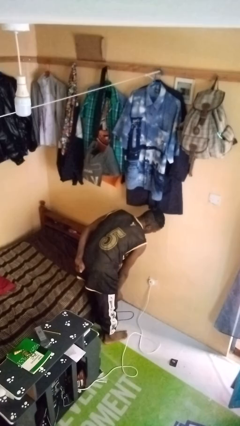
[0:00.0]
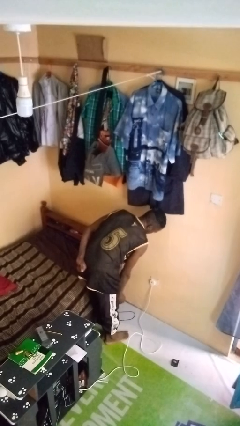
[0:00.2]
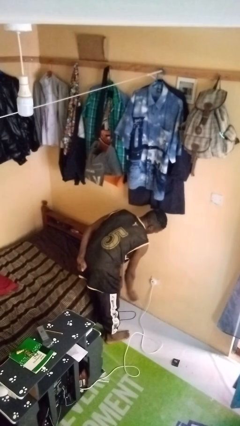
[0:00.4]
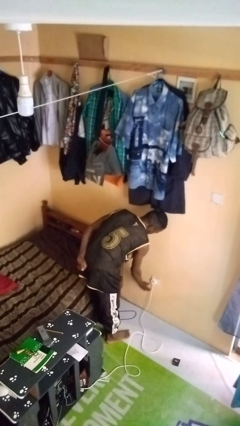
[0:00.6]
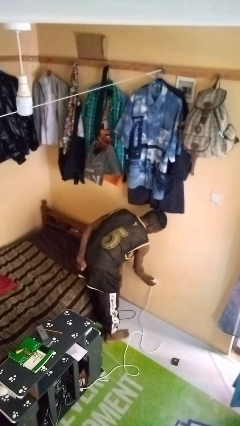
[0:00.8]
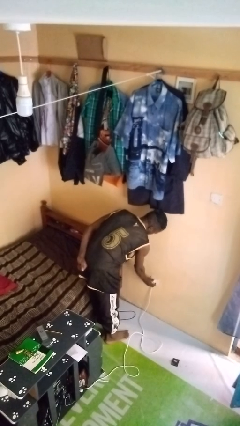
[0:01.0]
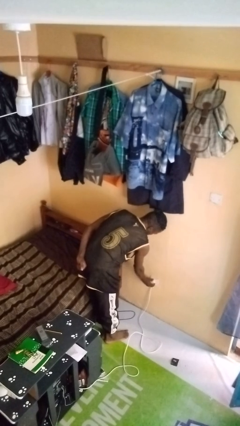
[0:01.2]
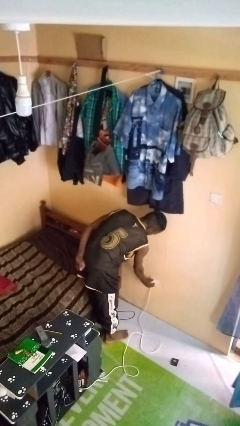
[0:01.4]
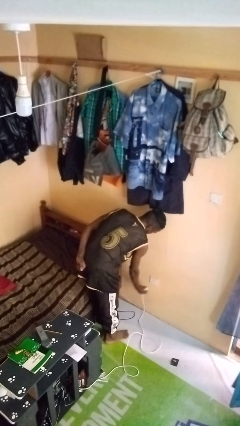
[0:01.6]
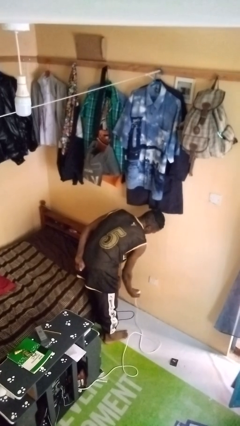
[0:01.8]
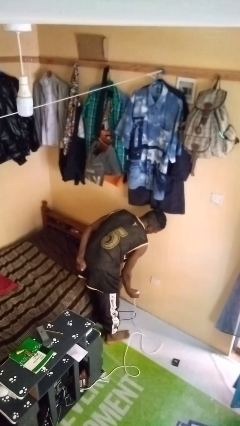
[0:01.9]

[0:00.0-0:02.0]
person unplugs from electrical socket

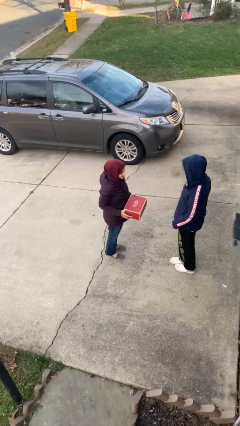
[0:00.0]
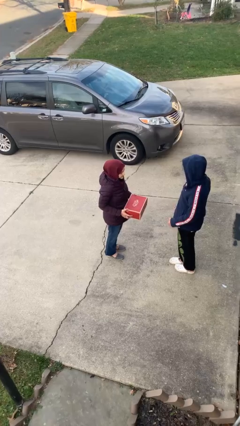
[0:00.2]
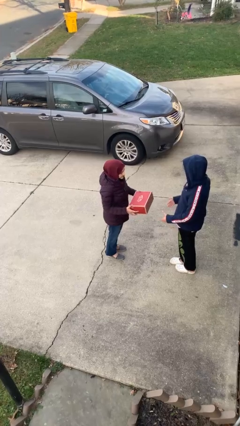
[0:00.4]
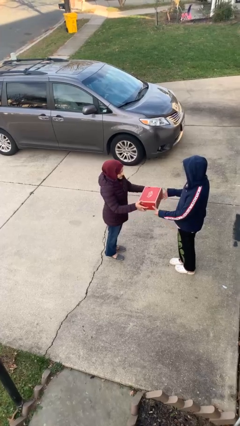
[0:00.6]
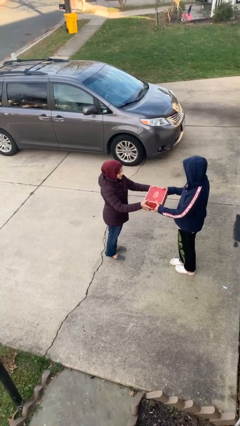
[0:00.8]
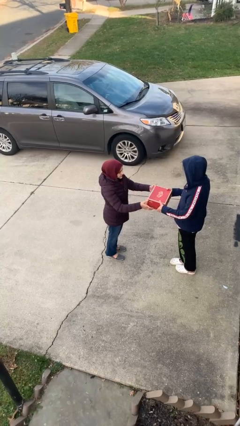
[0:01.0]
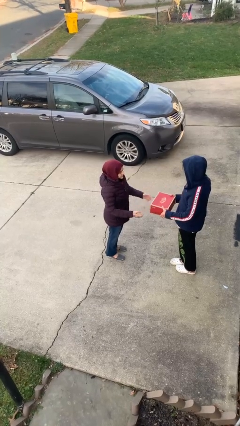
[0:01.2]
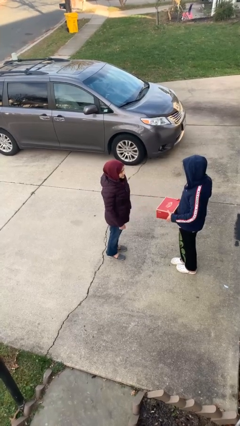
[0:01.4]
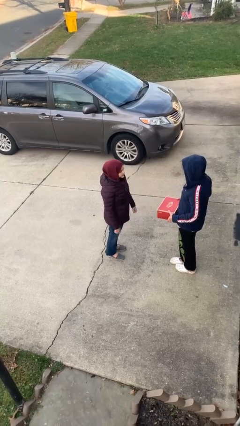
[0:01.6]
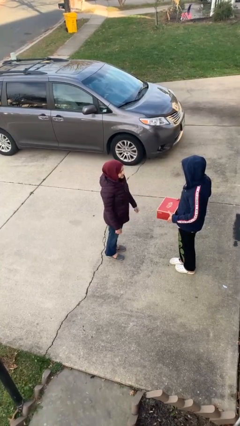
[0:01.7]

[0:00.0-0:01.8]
person transfers object to person

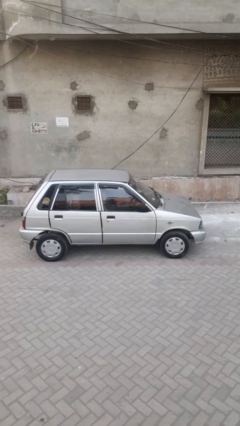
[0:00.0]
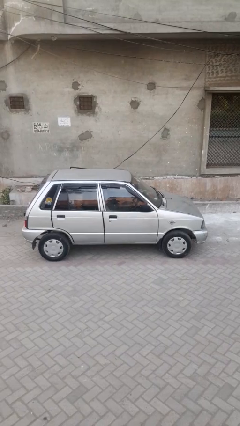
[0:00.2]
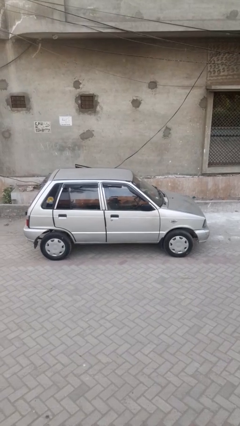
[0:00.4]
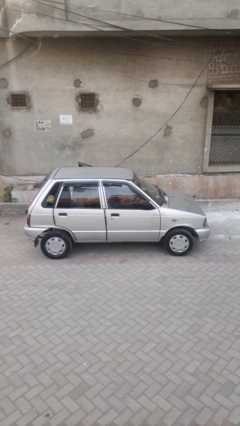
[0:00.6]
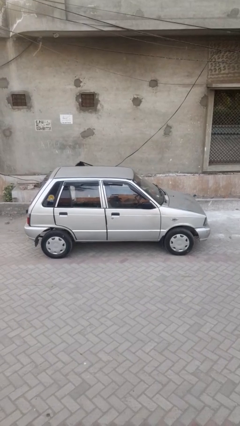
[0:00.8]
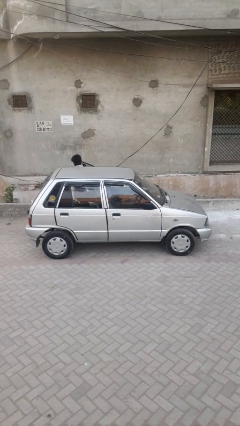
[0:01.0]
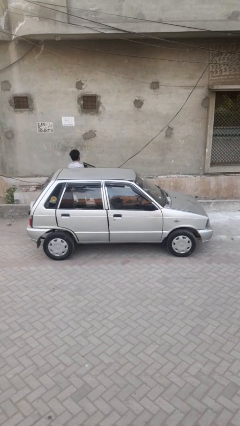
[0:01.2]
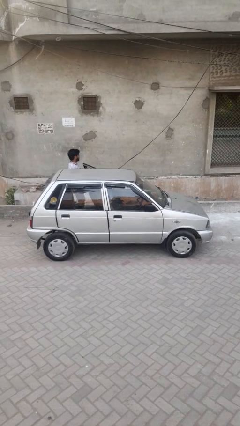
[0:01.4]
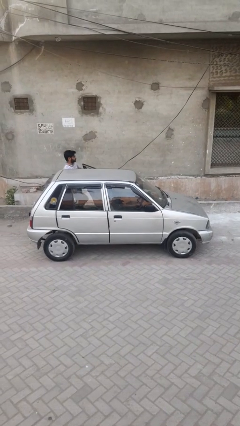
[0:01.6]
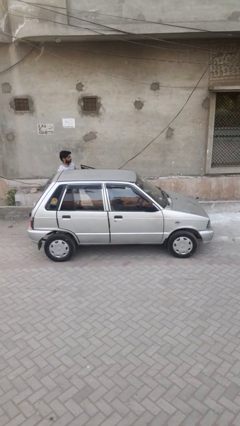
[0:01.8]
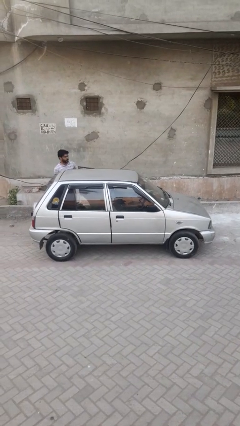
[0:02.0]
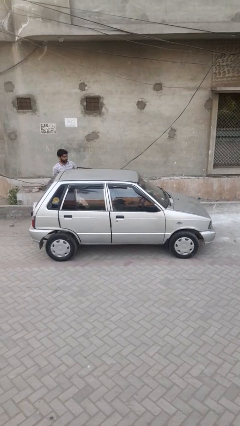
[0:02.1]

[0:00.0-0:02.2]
car drops off person

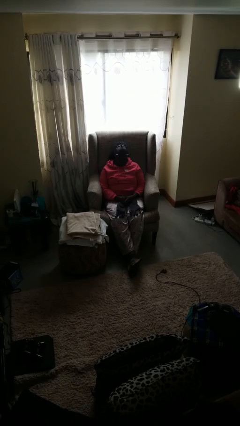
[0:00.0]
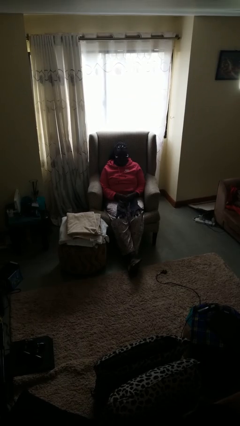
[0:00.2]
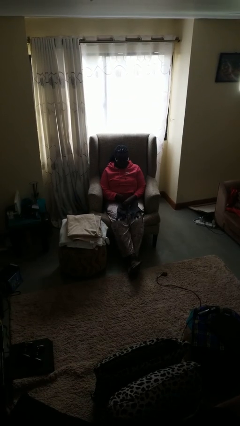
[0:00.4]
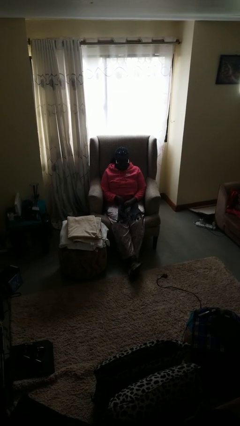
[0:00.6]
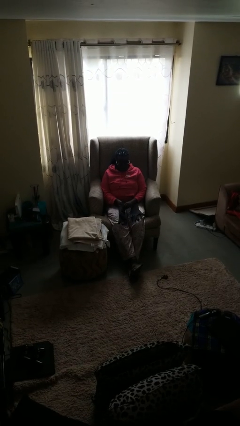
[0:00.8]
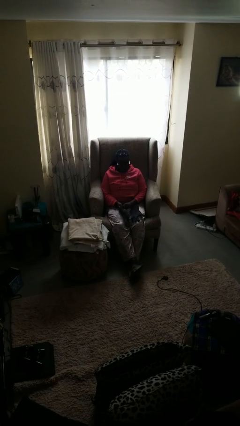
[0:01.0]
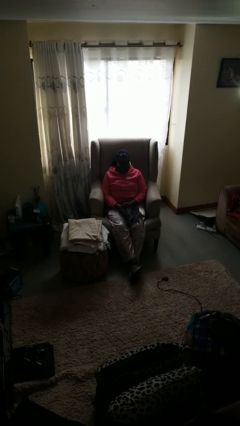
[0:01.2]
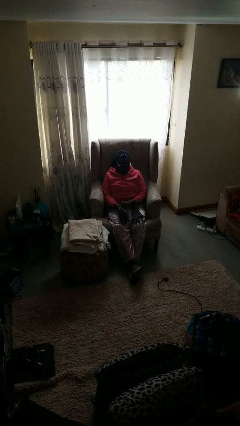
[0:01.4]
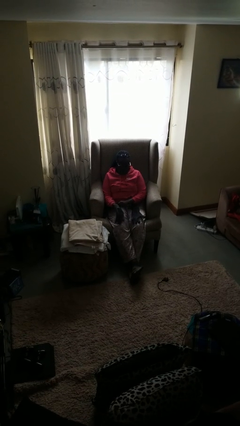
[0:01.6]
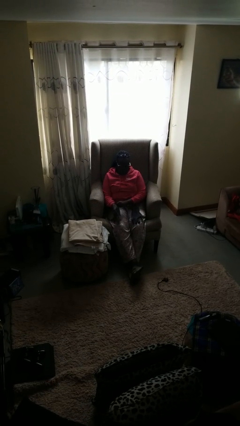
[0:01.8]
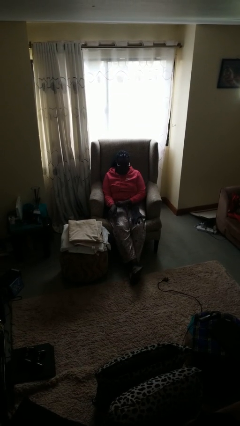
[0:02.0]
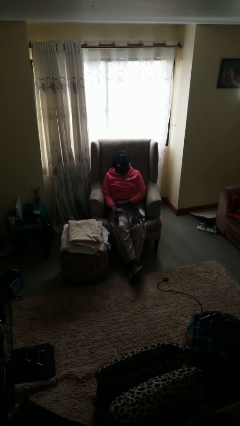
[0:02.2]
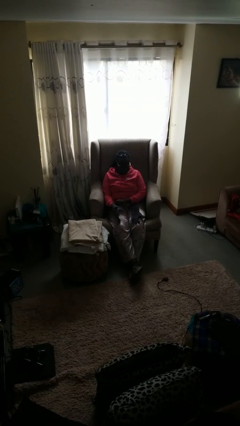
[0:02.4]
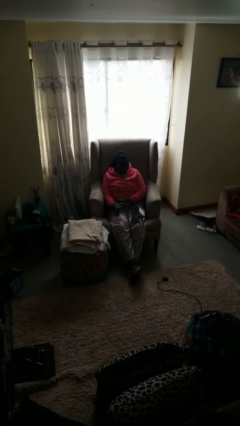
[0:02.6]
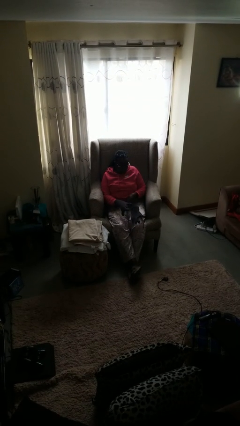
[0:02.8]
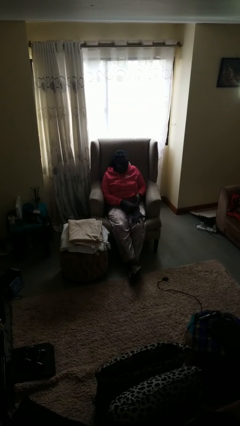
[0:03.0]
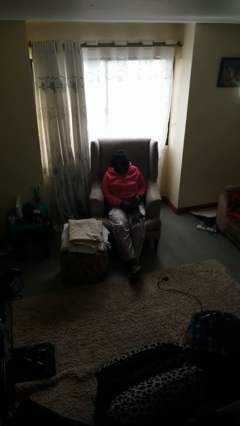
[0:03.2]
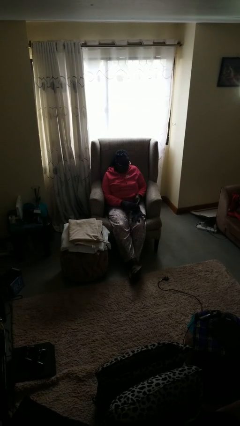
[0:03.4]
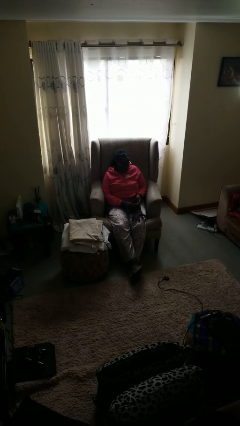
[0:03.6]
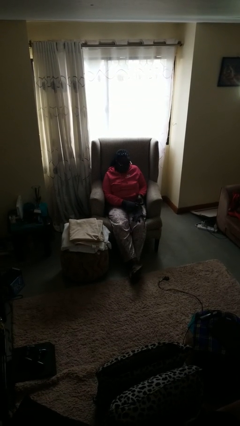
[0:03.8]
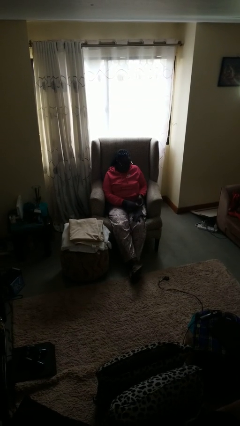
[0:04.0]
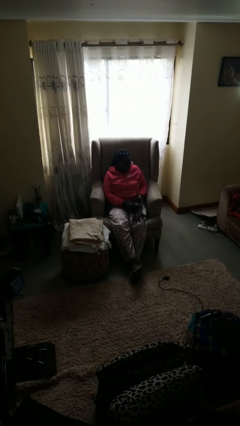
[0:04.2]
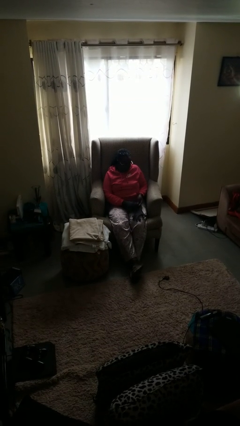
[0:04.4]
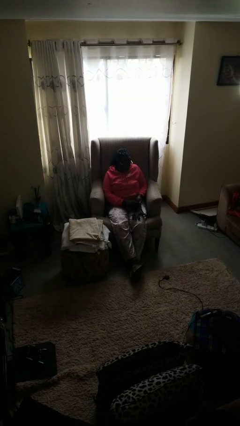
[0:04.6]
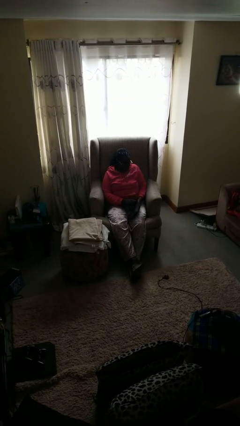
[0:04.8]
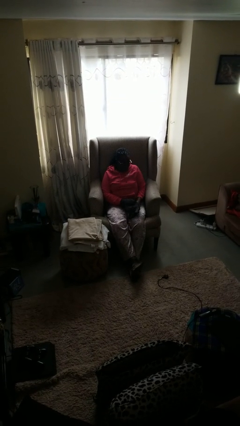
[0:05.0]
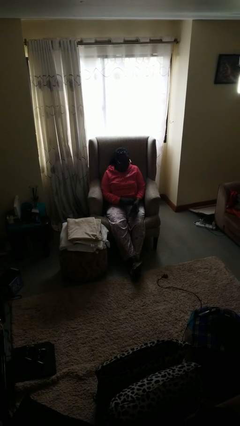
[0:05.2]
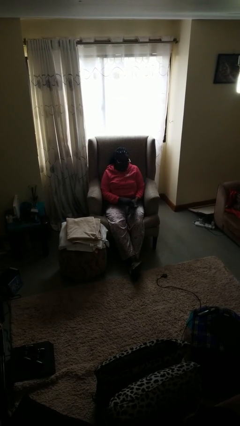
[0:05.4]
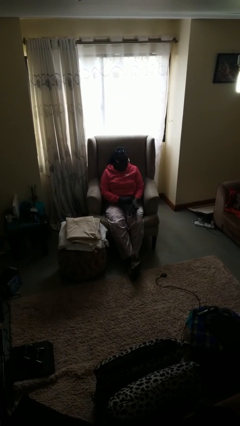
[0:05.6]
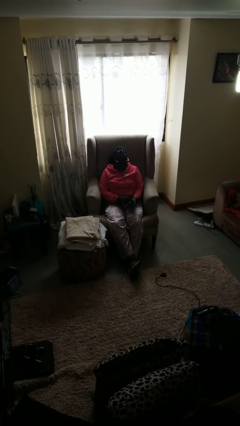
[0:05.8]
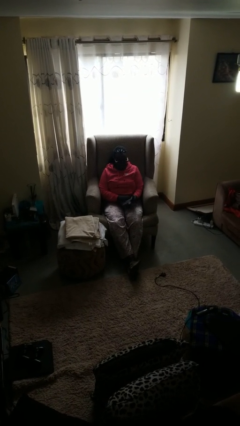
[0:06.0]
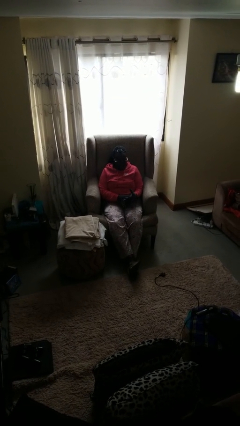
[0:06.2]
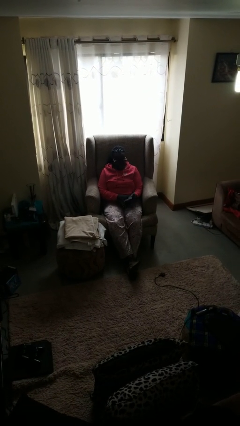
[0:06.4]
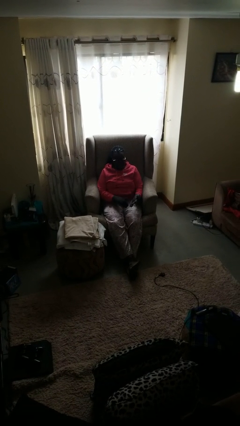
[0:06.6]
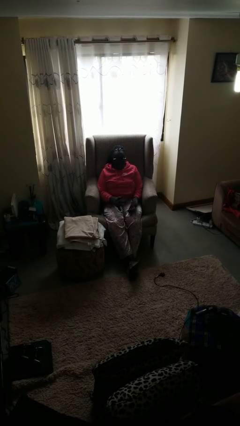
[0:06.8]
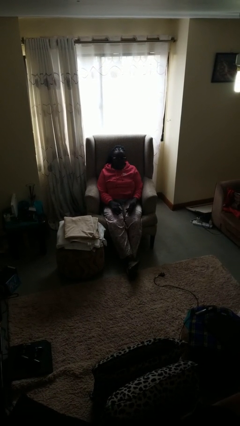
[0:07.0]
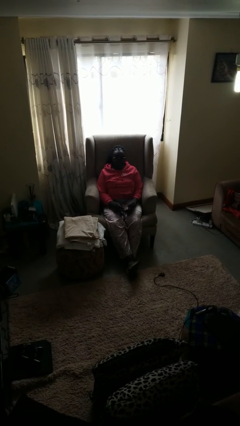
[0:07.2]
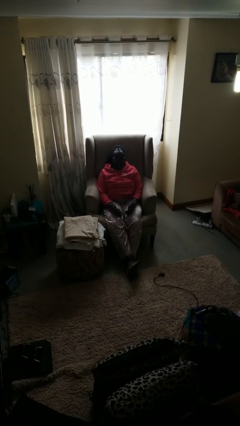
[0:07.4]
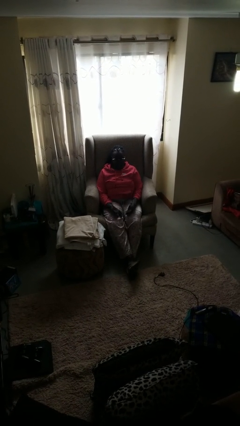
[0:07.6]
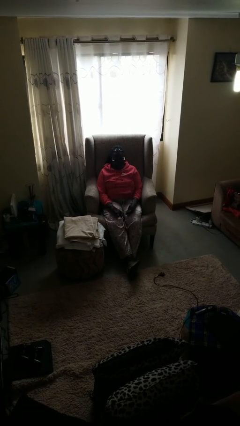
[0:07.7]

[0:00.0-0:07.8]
person puts on gloves

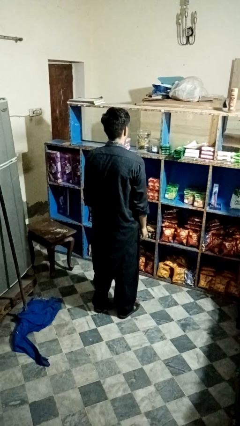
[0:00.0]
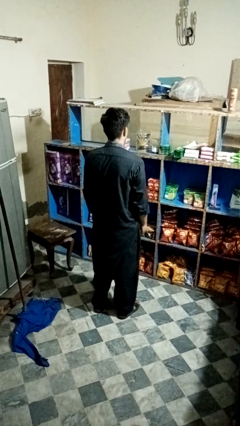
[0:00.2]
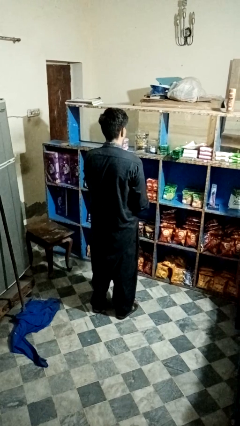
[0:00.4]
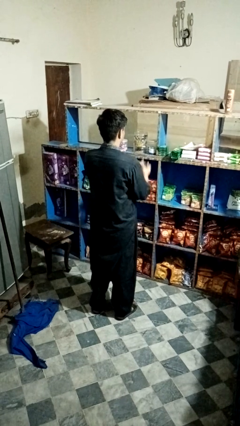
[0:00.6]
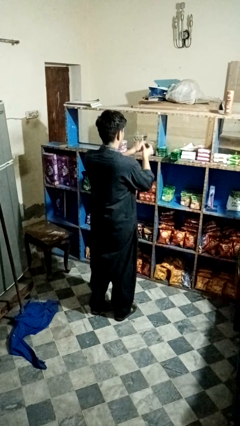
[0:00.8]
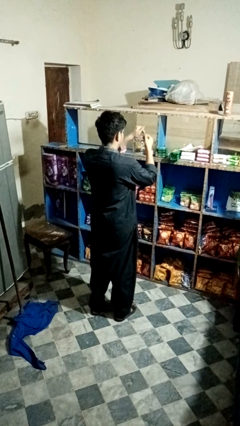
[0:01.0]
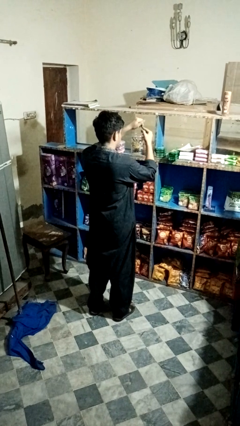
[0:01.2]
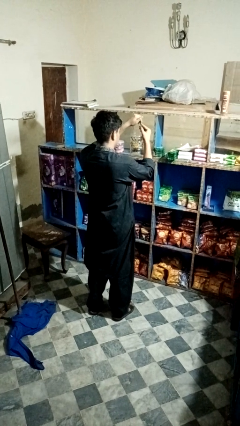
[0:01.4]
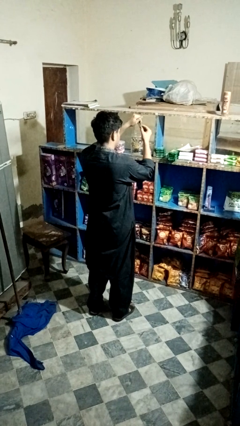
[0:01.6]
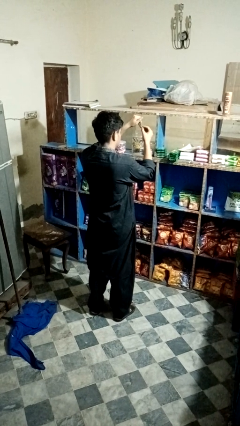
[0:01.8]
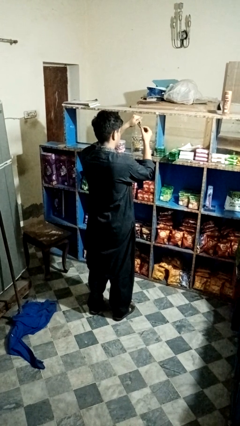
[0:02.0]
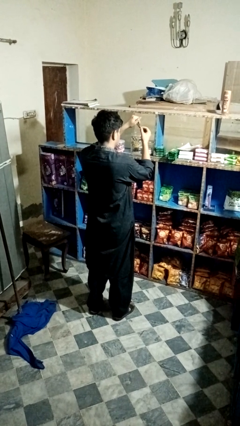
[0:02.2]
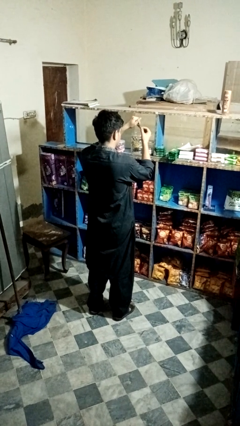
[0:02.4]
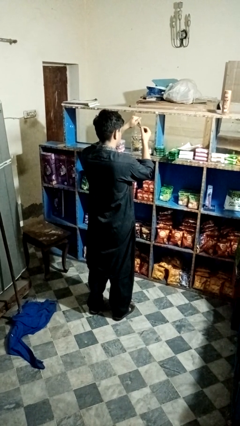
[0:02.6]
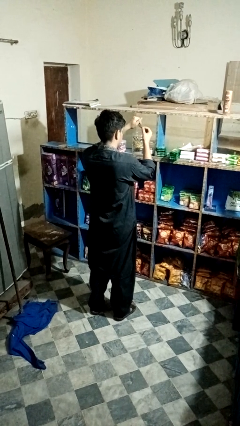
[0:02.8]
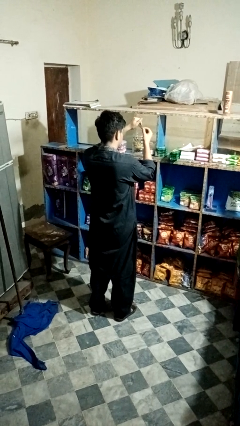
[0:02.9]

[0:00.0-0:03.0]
person clips fingernails

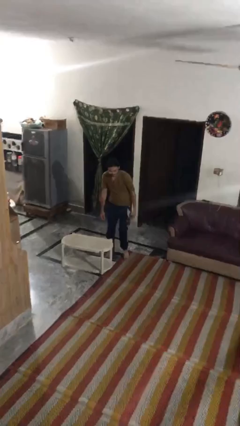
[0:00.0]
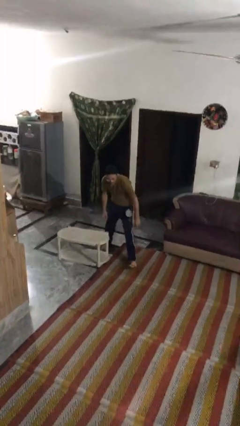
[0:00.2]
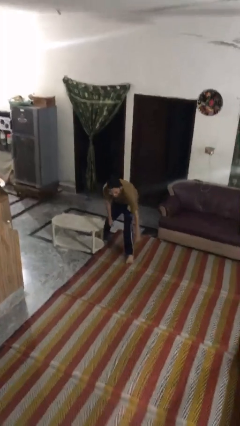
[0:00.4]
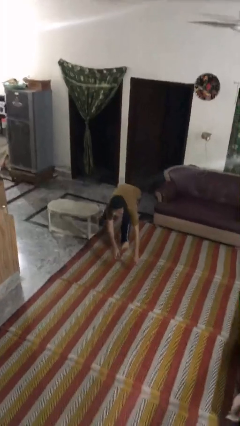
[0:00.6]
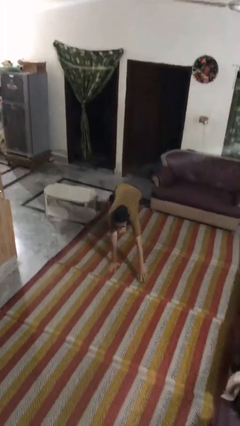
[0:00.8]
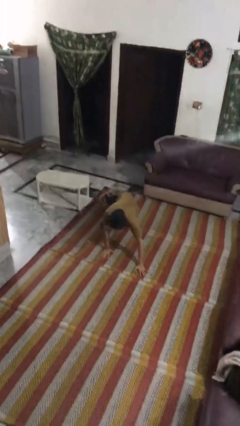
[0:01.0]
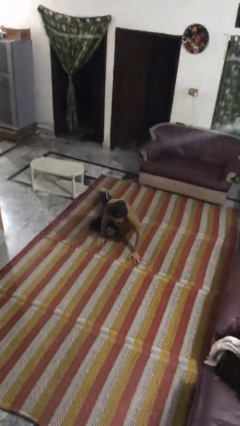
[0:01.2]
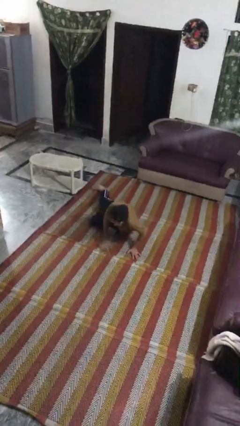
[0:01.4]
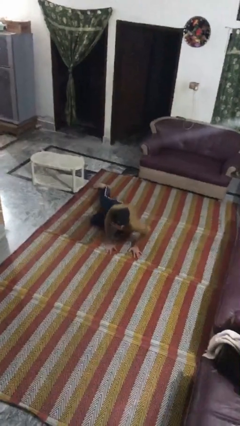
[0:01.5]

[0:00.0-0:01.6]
person trips on object on floor
